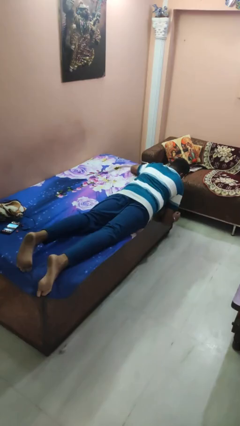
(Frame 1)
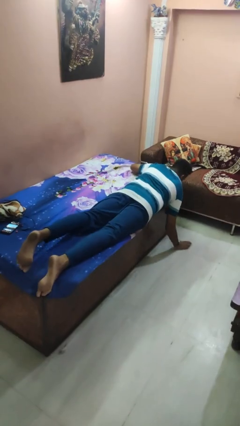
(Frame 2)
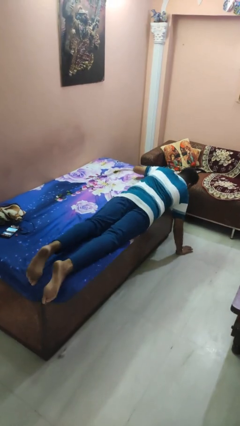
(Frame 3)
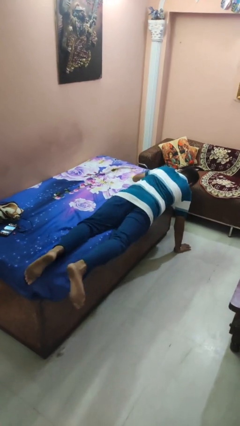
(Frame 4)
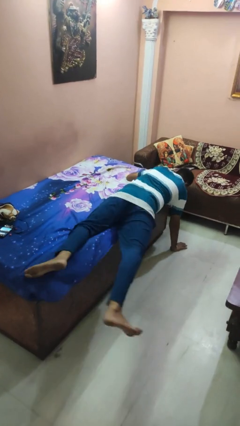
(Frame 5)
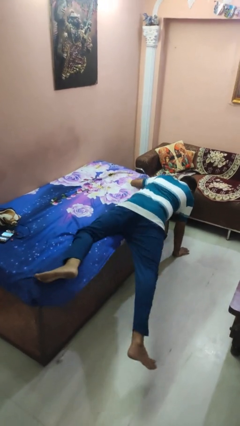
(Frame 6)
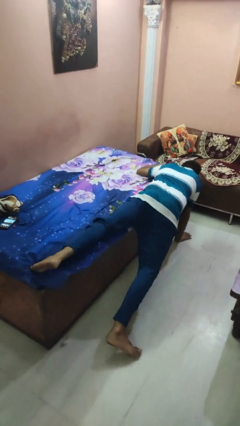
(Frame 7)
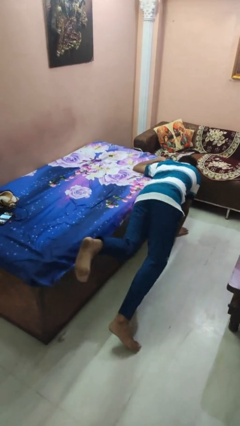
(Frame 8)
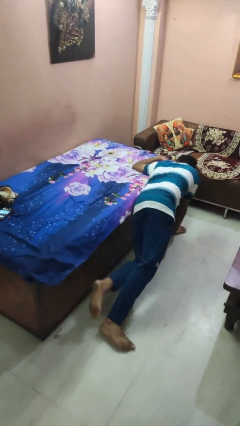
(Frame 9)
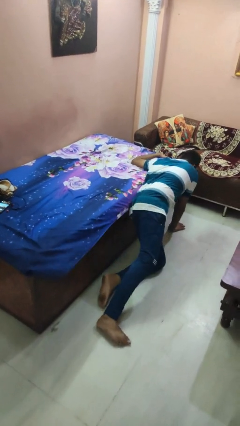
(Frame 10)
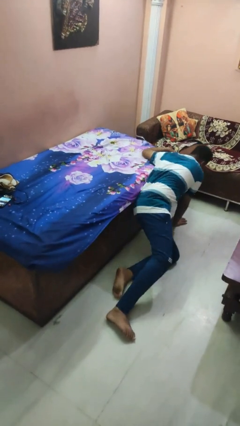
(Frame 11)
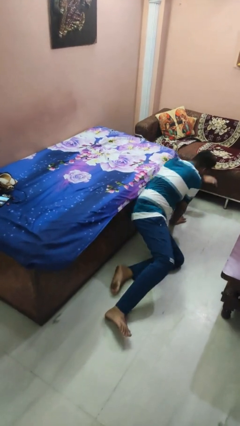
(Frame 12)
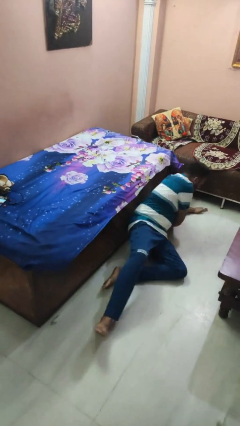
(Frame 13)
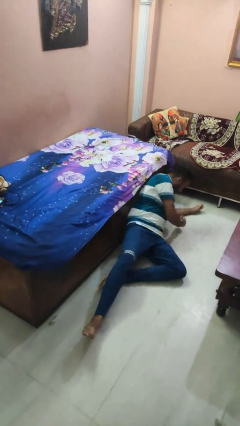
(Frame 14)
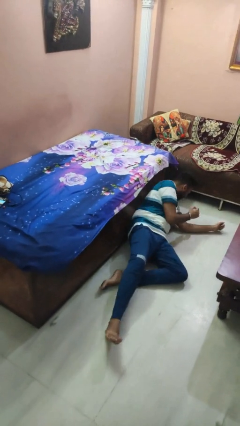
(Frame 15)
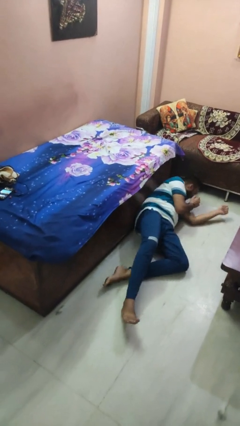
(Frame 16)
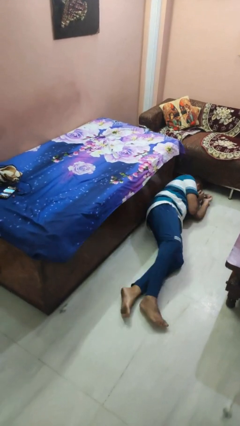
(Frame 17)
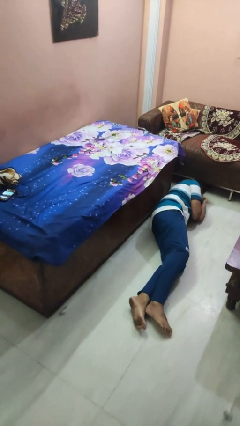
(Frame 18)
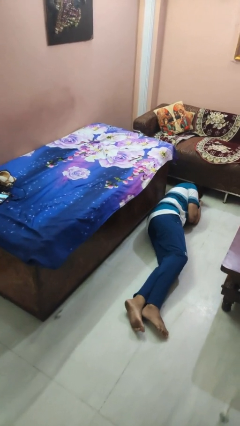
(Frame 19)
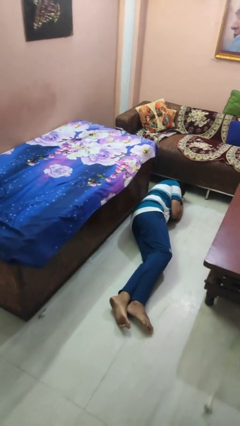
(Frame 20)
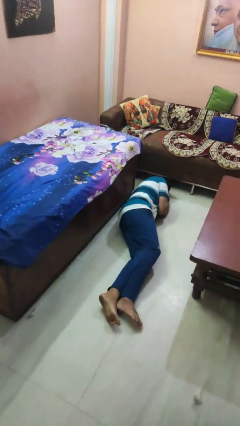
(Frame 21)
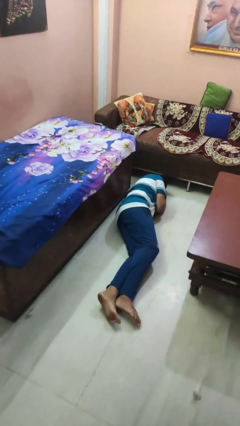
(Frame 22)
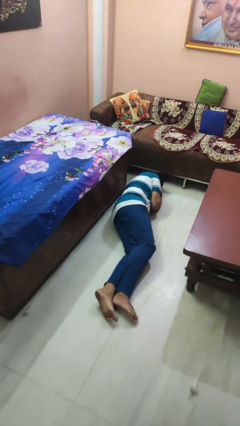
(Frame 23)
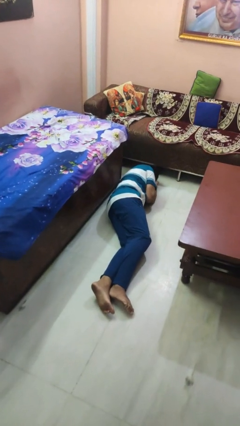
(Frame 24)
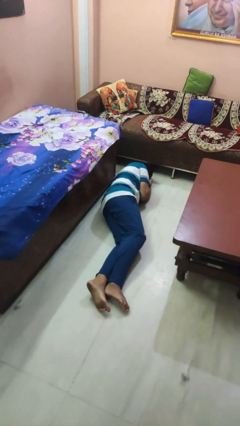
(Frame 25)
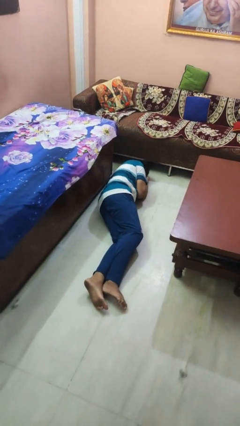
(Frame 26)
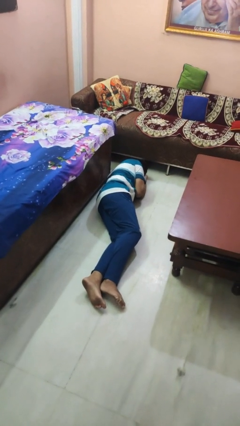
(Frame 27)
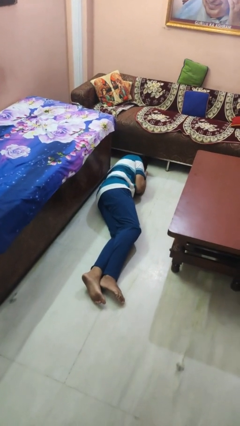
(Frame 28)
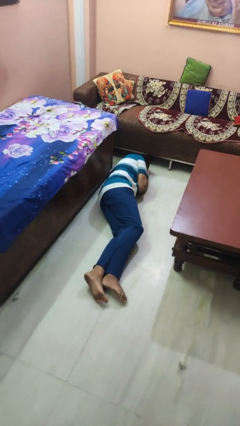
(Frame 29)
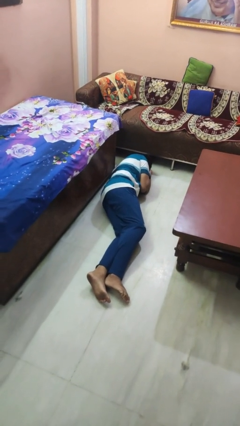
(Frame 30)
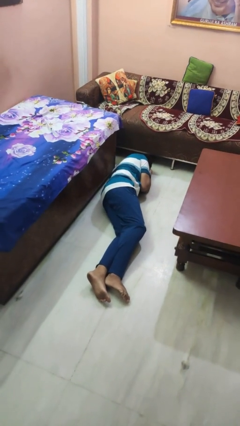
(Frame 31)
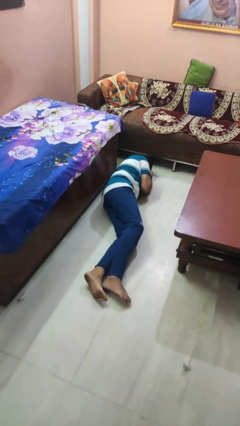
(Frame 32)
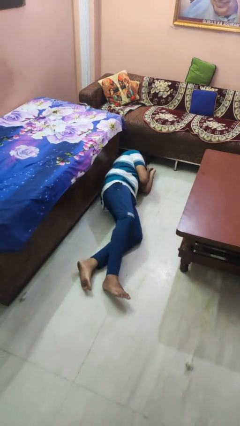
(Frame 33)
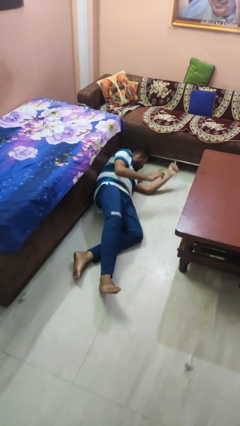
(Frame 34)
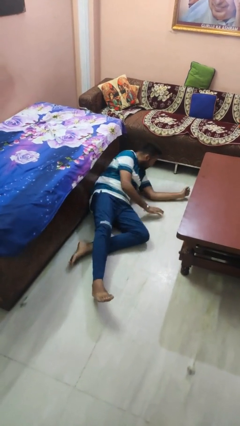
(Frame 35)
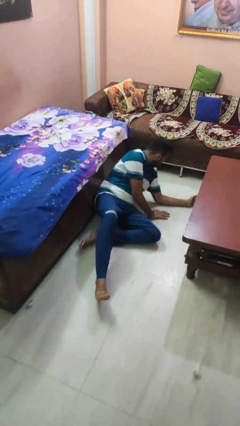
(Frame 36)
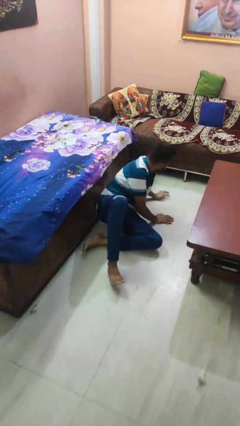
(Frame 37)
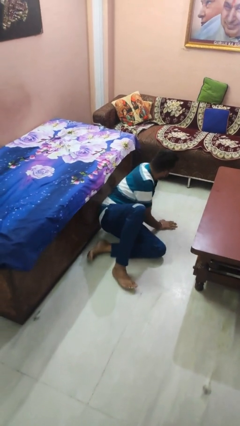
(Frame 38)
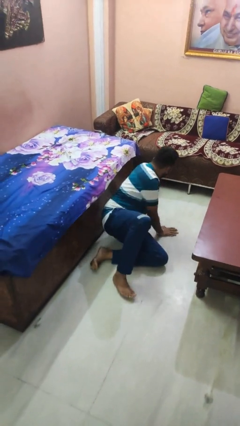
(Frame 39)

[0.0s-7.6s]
person falls from bed

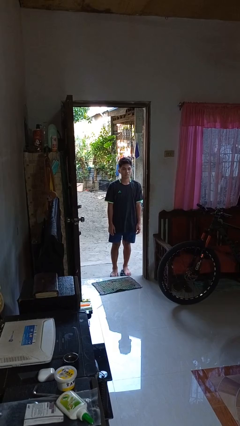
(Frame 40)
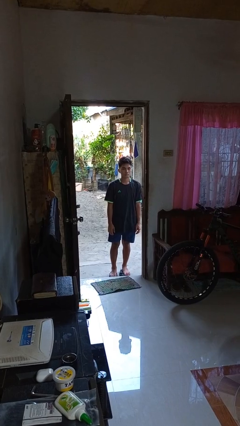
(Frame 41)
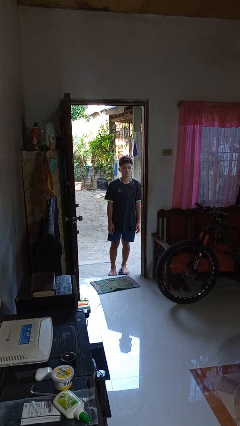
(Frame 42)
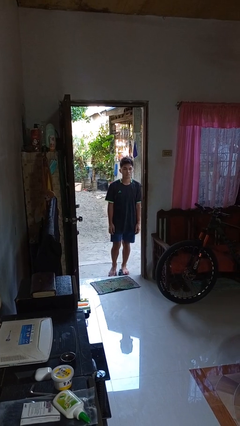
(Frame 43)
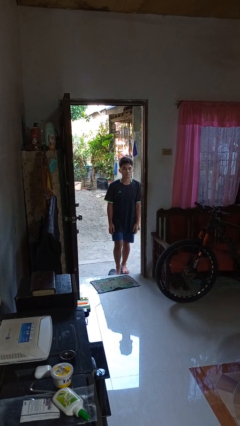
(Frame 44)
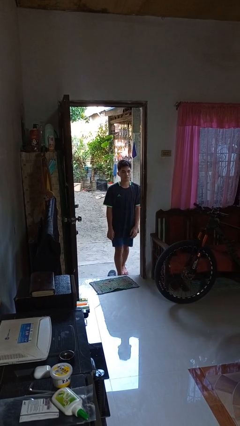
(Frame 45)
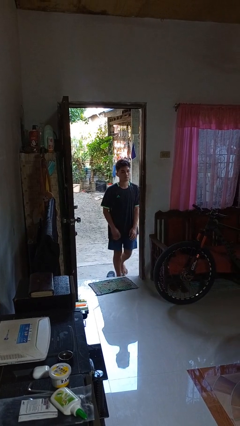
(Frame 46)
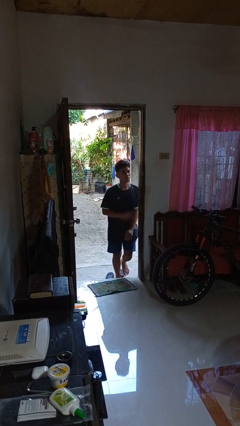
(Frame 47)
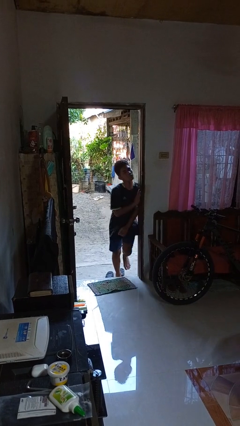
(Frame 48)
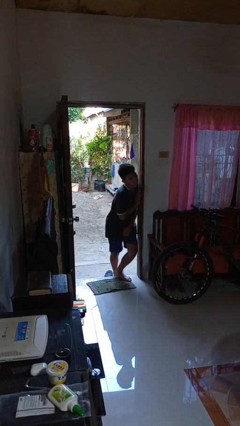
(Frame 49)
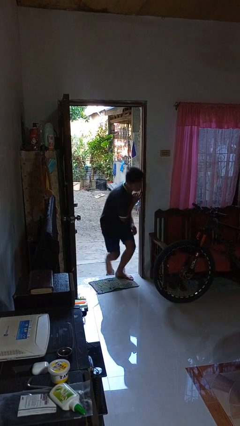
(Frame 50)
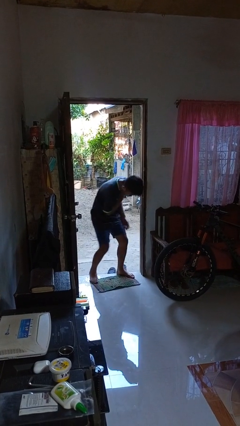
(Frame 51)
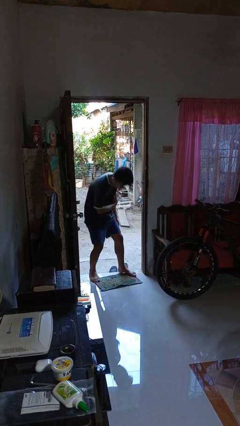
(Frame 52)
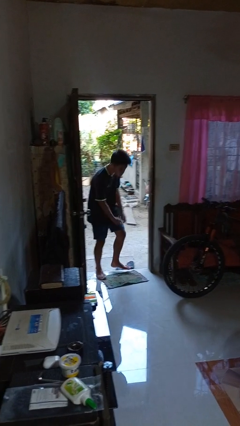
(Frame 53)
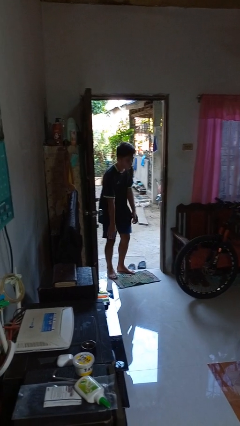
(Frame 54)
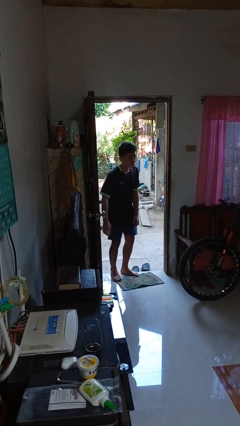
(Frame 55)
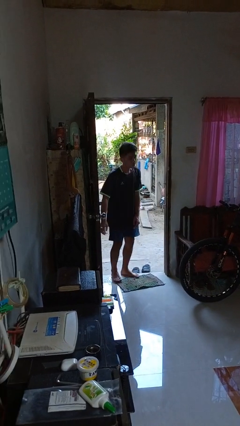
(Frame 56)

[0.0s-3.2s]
person bumps into wall

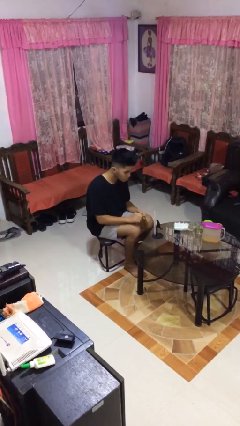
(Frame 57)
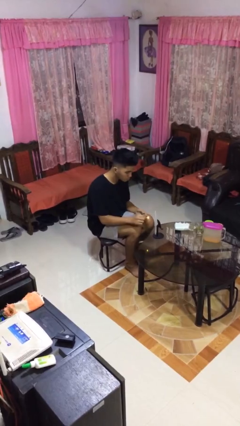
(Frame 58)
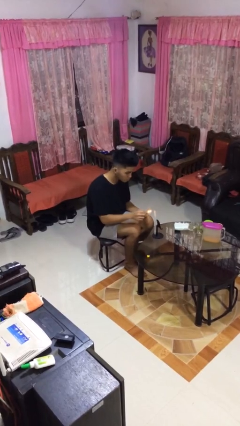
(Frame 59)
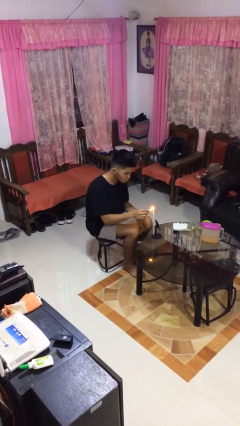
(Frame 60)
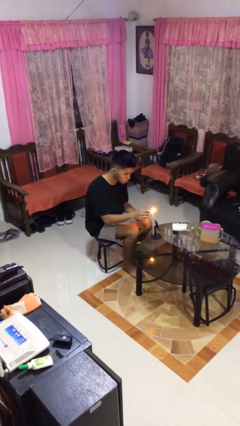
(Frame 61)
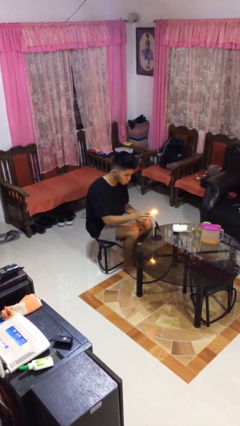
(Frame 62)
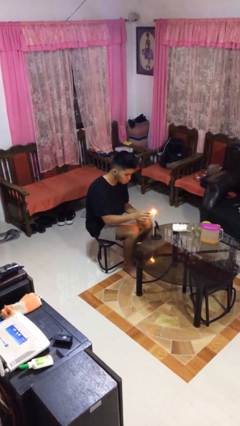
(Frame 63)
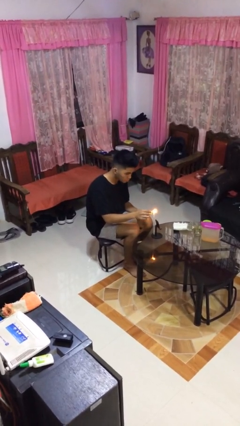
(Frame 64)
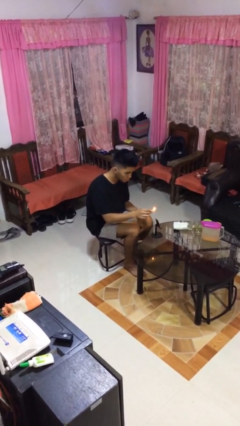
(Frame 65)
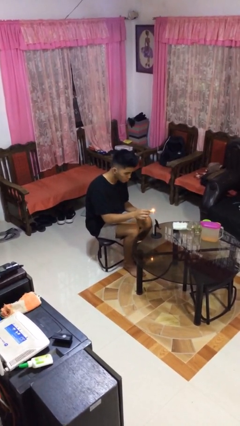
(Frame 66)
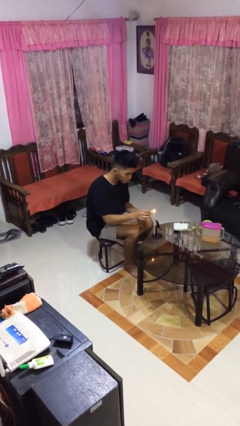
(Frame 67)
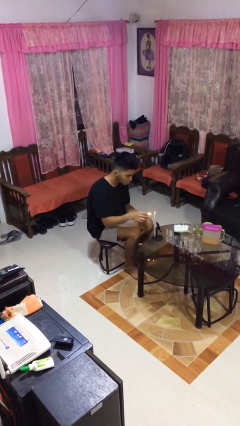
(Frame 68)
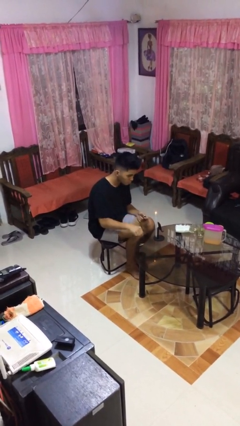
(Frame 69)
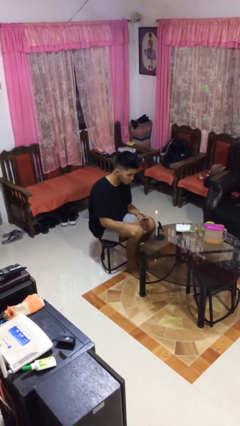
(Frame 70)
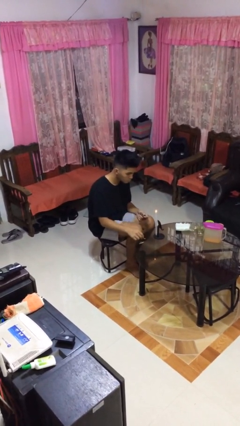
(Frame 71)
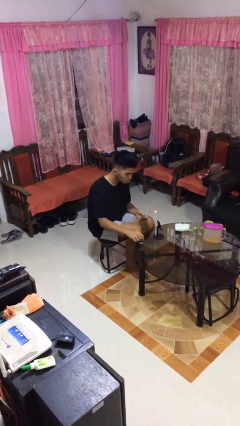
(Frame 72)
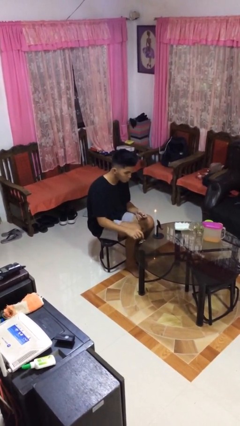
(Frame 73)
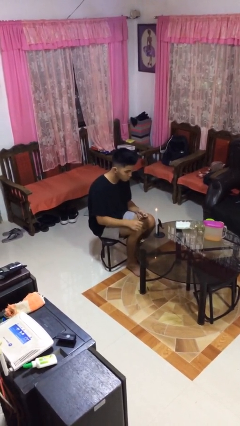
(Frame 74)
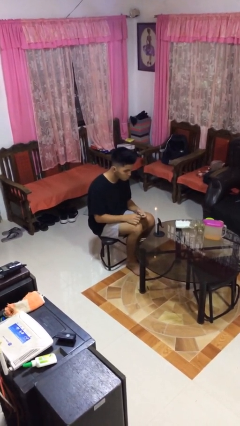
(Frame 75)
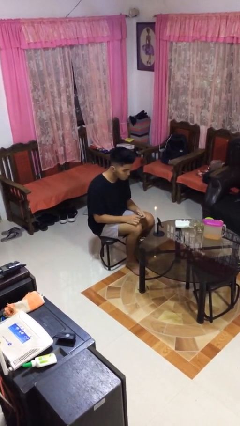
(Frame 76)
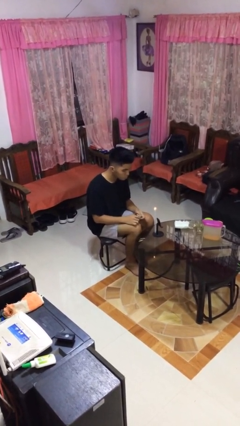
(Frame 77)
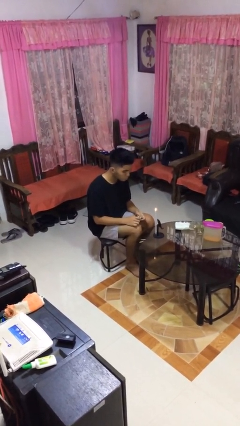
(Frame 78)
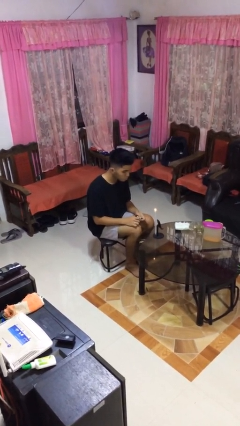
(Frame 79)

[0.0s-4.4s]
person lights candle

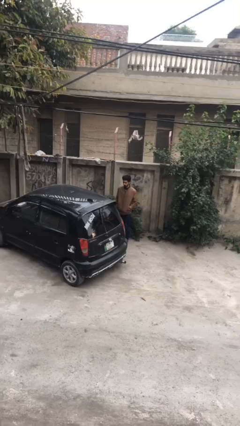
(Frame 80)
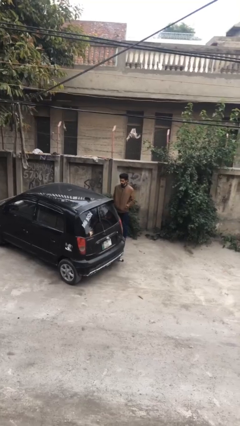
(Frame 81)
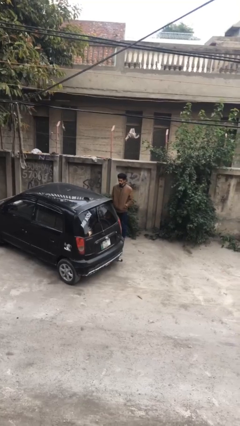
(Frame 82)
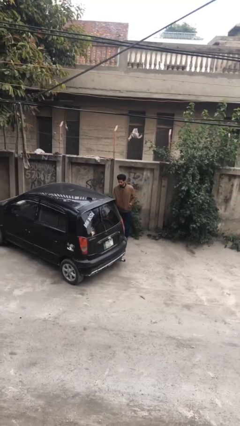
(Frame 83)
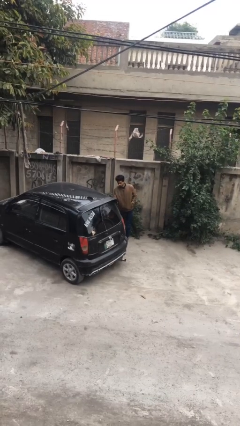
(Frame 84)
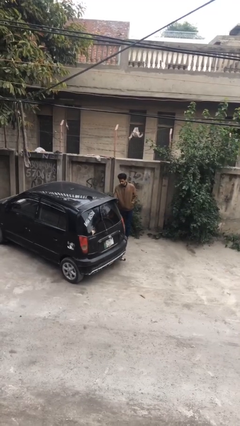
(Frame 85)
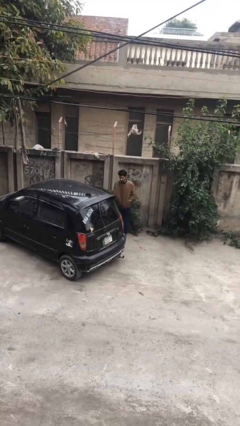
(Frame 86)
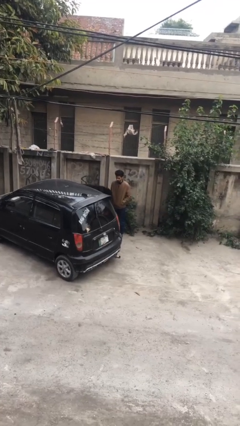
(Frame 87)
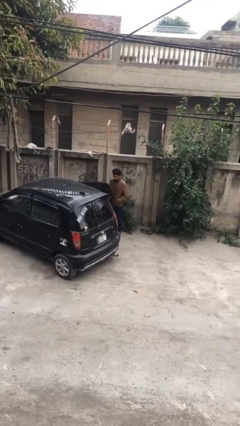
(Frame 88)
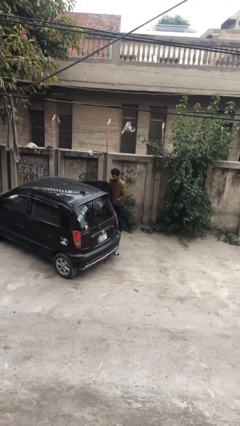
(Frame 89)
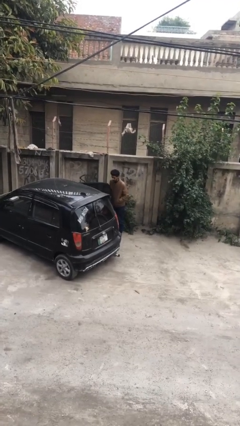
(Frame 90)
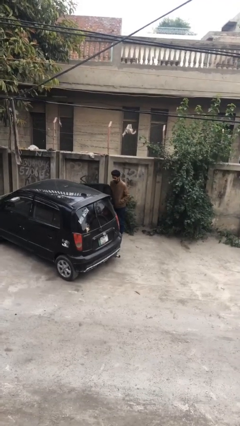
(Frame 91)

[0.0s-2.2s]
person opens car door

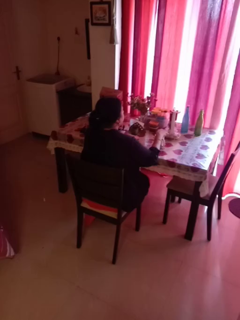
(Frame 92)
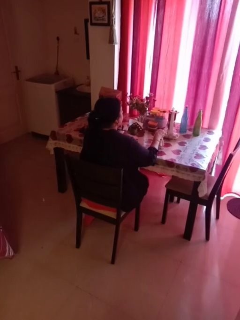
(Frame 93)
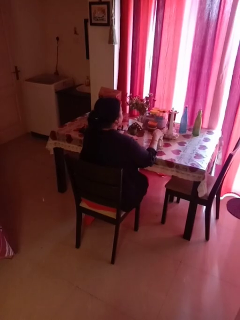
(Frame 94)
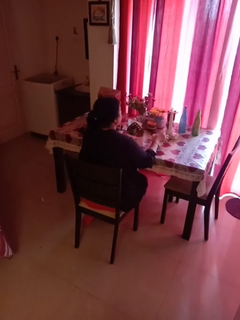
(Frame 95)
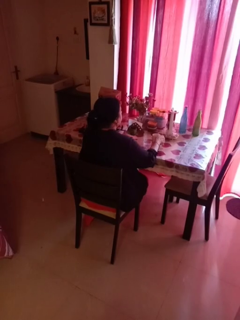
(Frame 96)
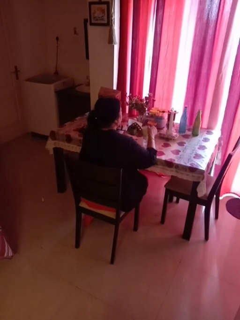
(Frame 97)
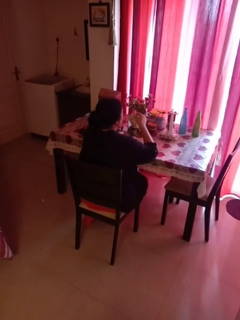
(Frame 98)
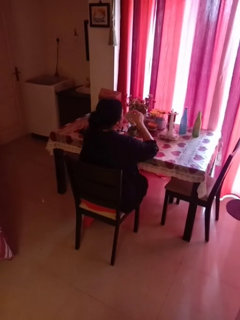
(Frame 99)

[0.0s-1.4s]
person stirs mug
